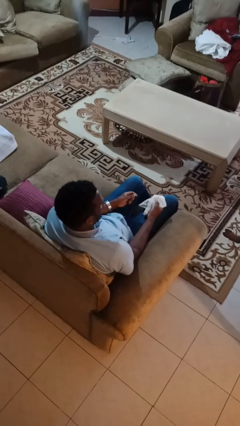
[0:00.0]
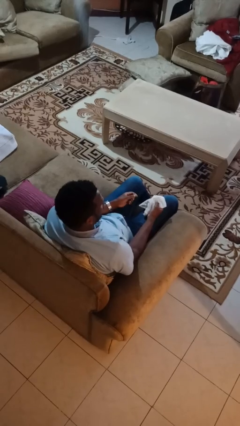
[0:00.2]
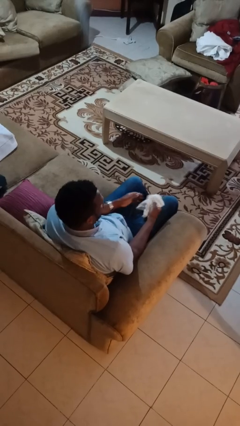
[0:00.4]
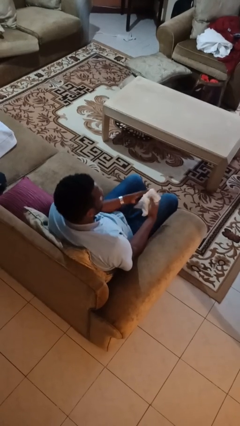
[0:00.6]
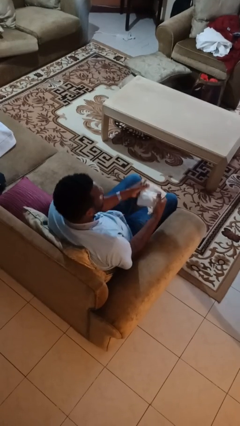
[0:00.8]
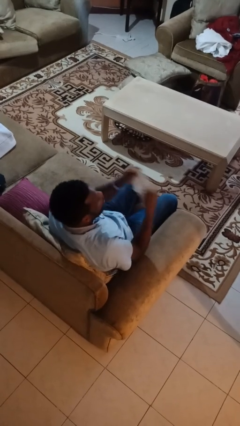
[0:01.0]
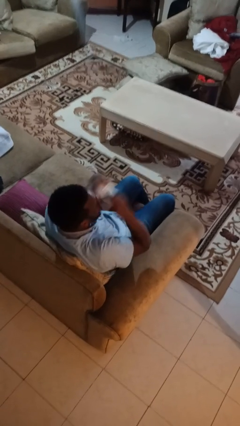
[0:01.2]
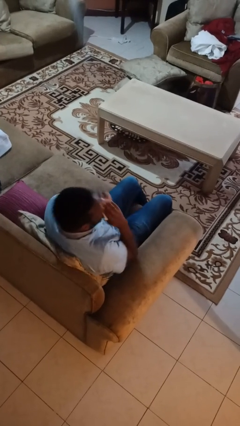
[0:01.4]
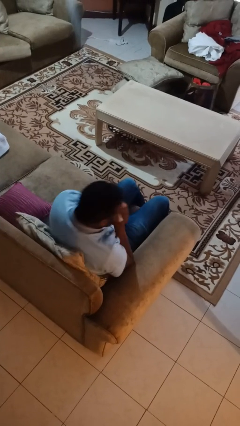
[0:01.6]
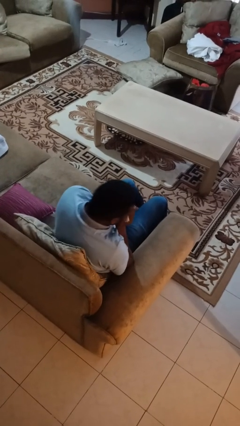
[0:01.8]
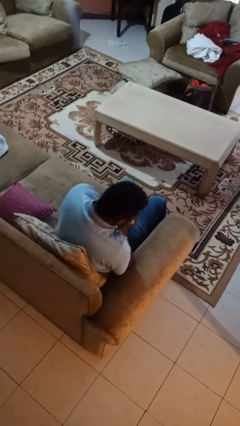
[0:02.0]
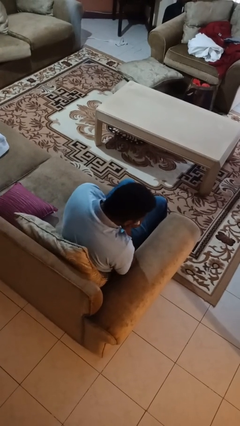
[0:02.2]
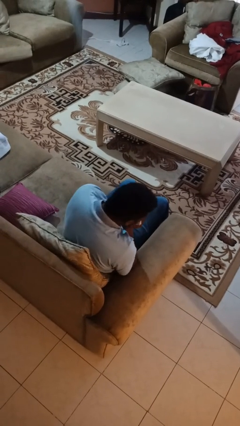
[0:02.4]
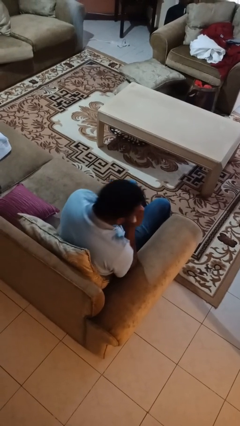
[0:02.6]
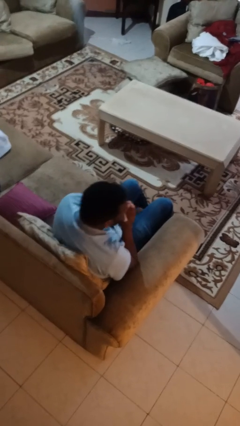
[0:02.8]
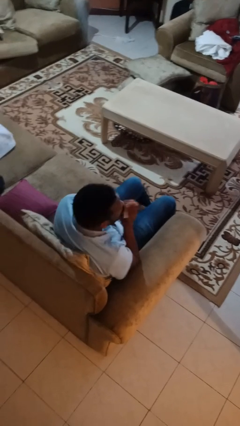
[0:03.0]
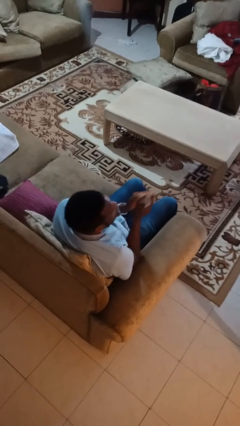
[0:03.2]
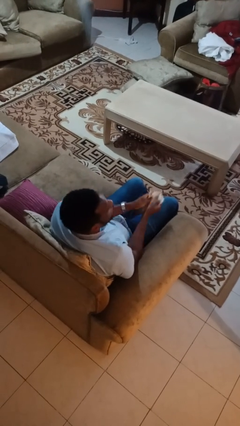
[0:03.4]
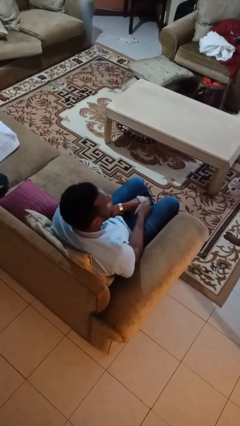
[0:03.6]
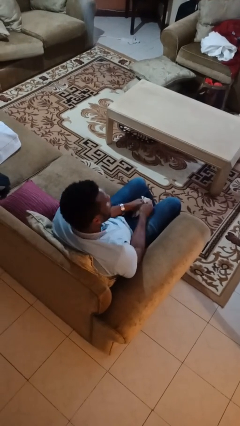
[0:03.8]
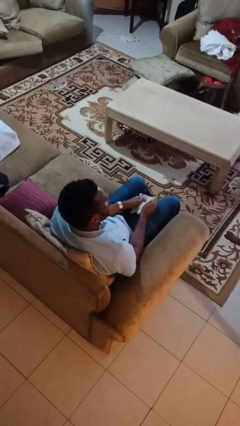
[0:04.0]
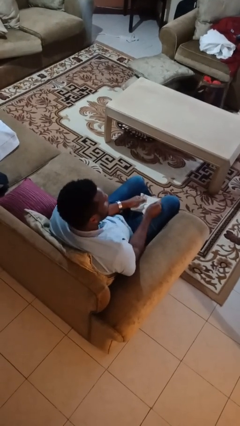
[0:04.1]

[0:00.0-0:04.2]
person blows nose

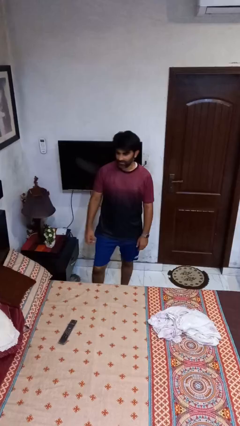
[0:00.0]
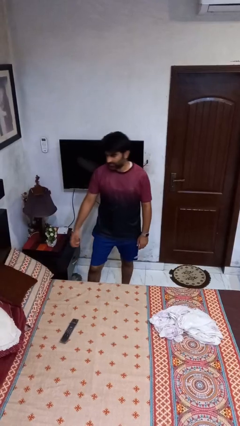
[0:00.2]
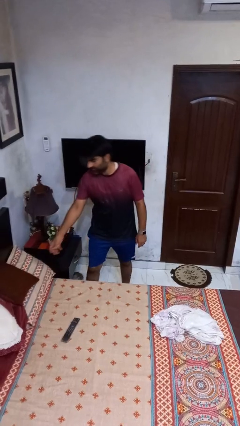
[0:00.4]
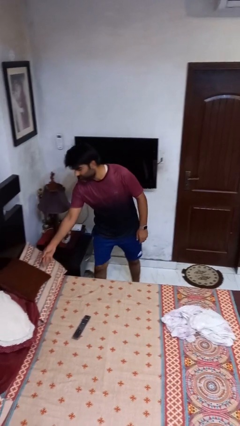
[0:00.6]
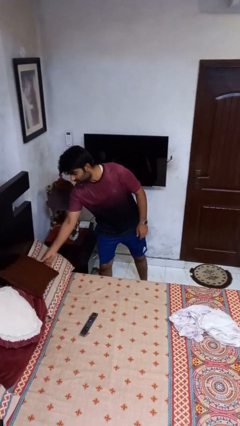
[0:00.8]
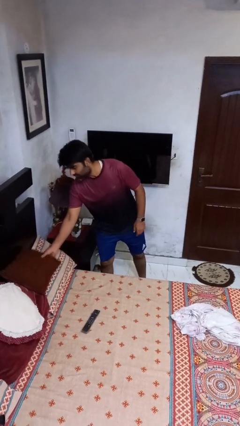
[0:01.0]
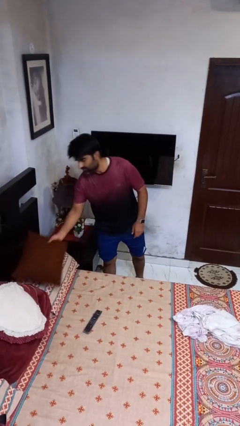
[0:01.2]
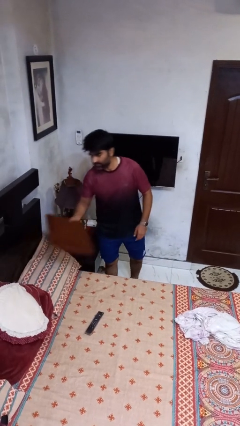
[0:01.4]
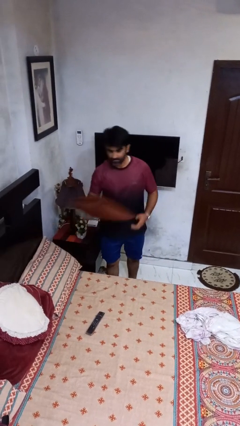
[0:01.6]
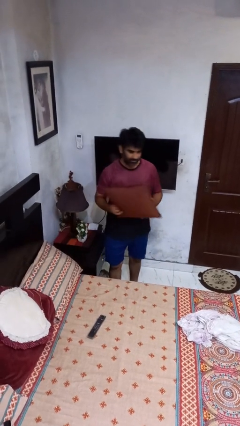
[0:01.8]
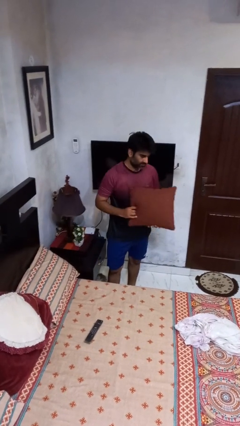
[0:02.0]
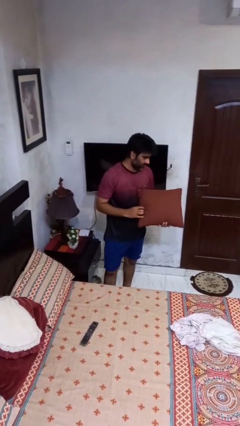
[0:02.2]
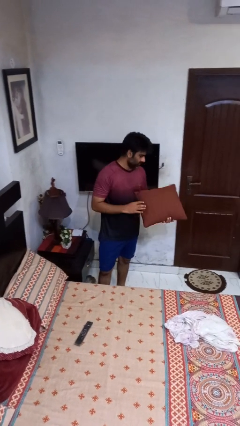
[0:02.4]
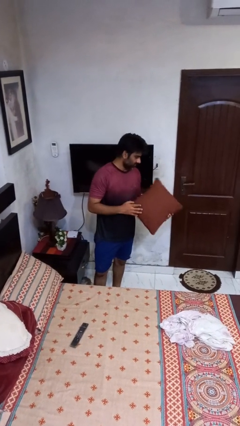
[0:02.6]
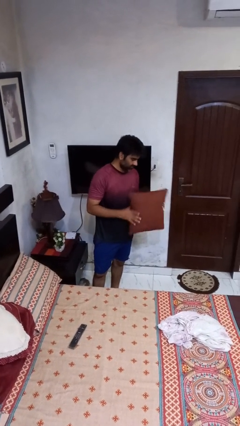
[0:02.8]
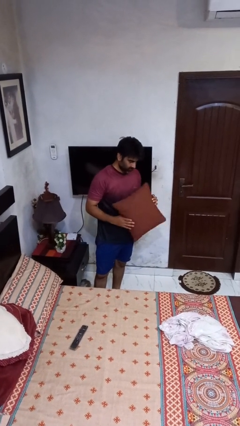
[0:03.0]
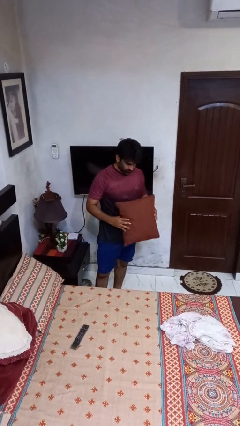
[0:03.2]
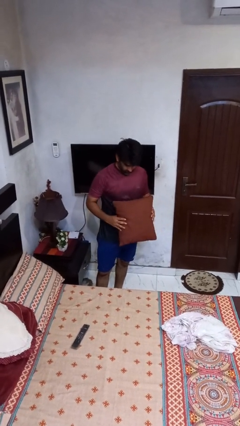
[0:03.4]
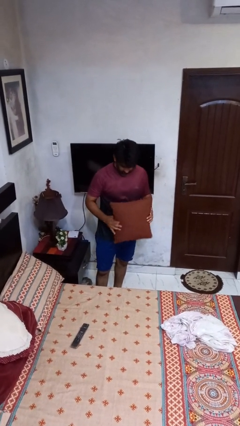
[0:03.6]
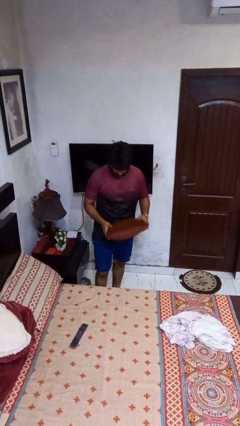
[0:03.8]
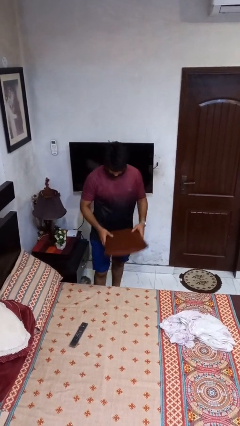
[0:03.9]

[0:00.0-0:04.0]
person picks up object from bed

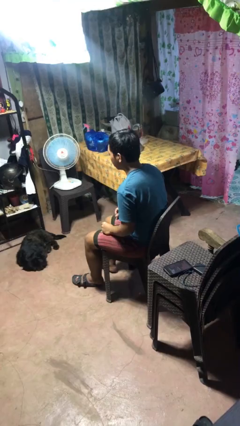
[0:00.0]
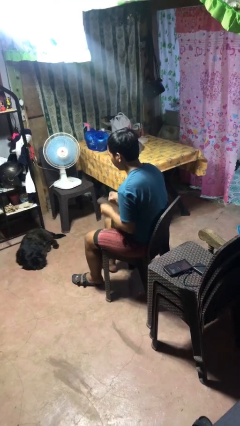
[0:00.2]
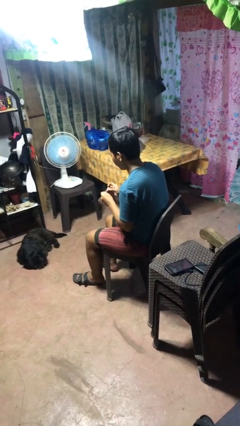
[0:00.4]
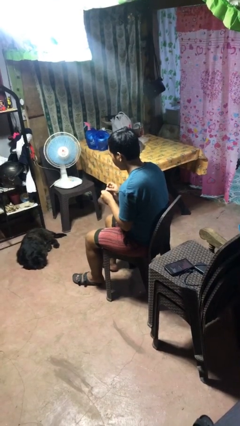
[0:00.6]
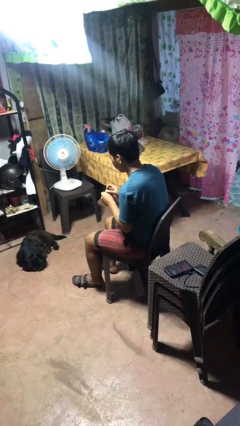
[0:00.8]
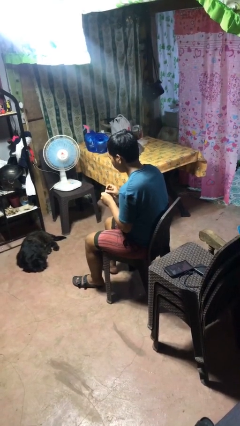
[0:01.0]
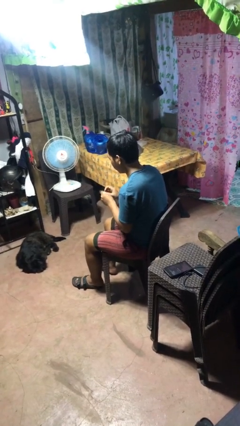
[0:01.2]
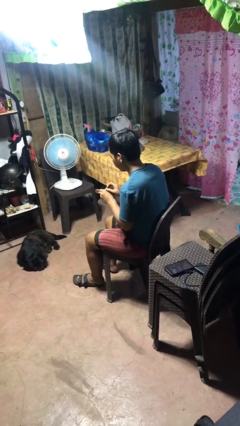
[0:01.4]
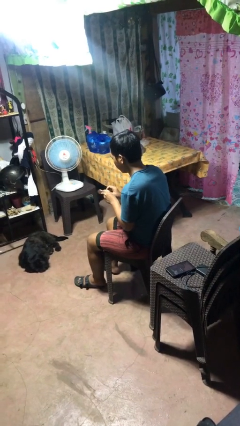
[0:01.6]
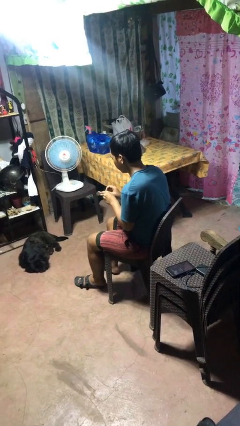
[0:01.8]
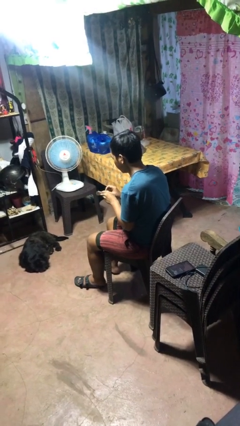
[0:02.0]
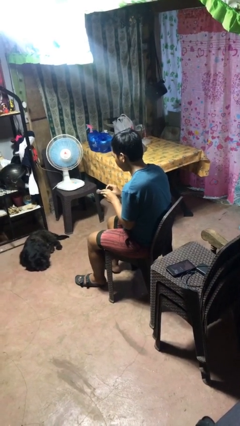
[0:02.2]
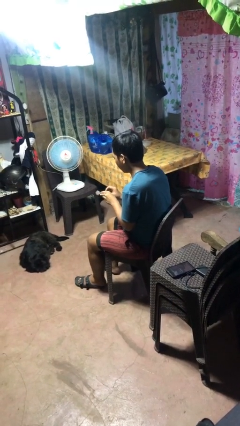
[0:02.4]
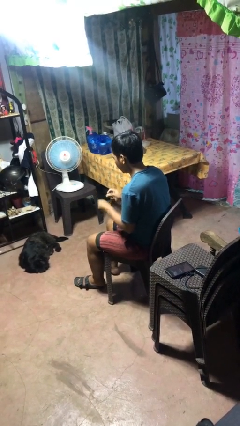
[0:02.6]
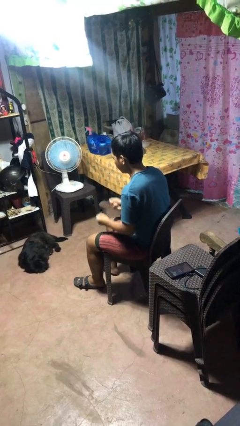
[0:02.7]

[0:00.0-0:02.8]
person files fingernails

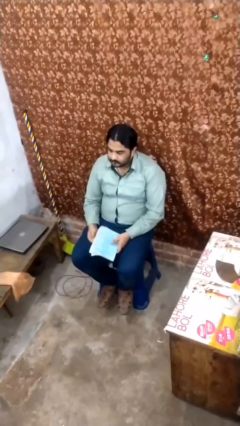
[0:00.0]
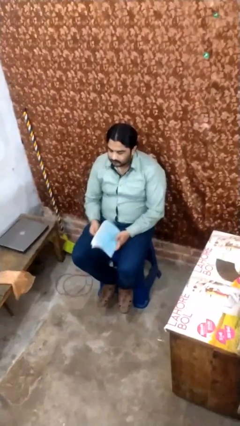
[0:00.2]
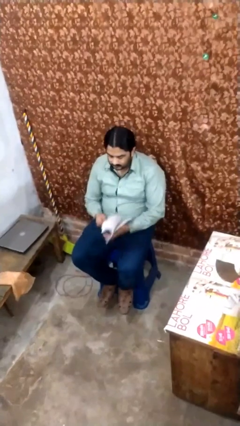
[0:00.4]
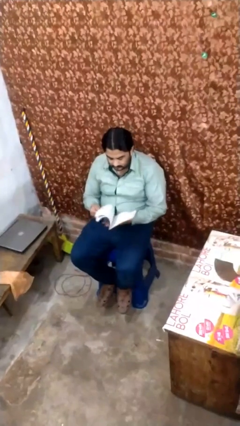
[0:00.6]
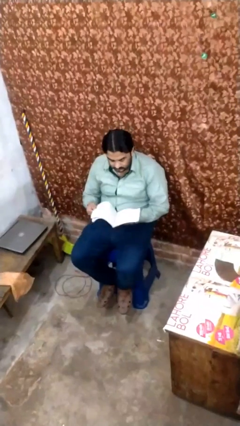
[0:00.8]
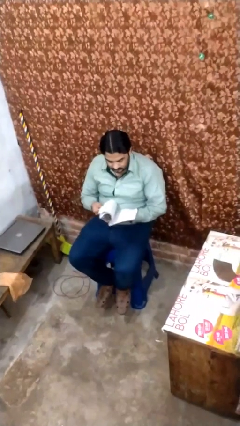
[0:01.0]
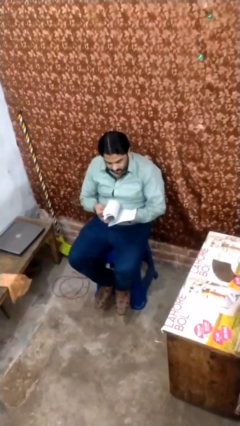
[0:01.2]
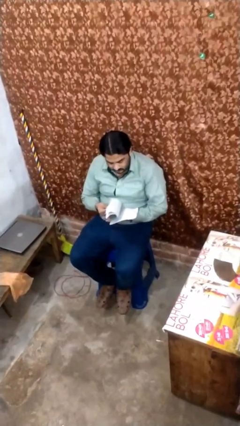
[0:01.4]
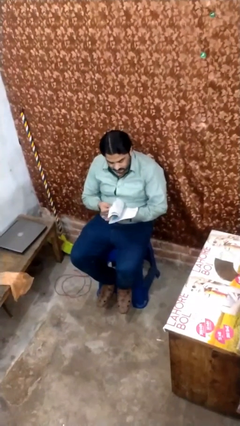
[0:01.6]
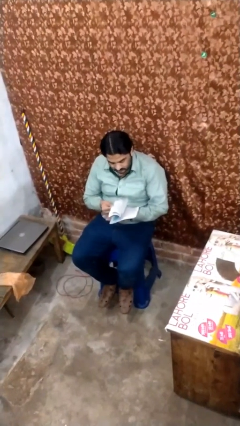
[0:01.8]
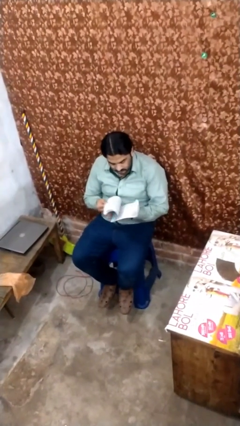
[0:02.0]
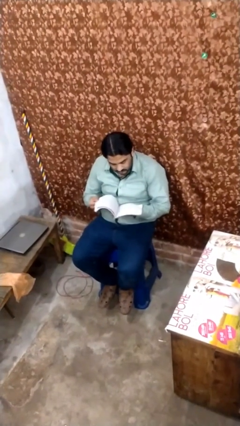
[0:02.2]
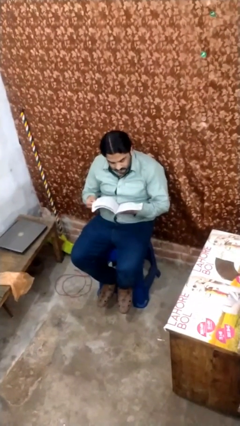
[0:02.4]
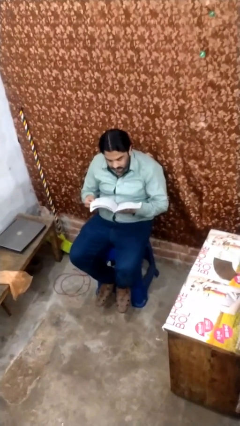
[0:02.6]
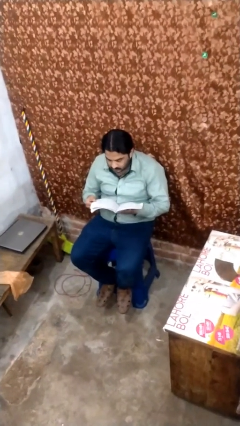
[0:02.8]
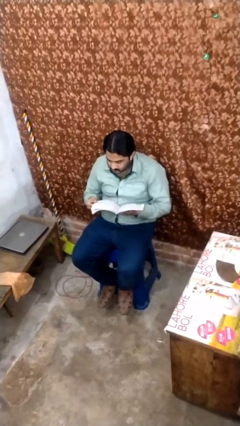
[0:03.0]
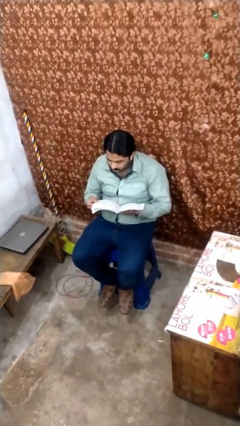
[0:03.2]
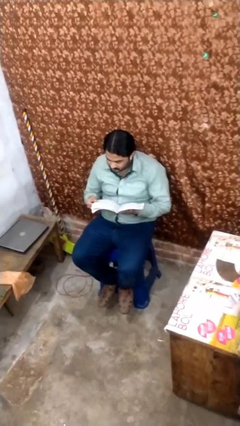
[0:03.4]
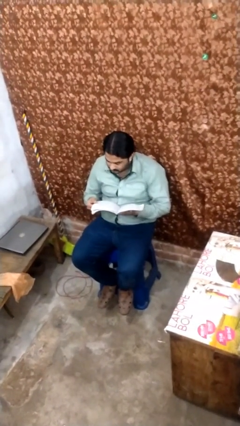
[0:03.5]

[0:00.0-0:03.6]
person reads document

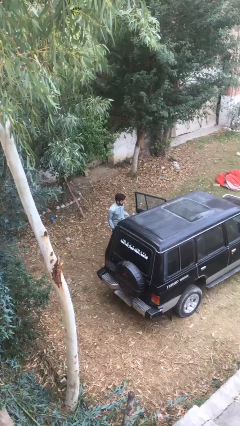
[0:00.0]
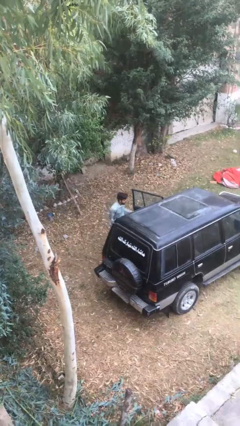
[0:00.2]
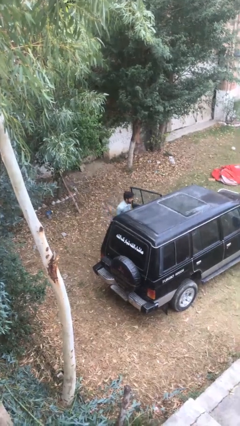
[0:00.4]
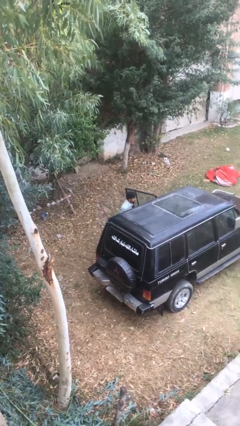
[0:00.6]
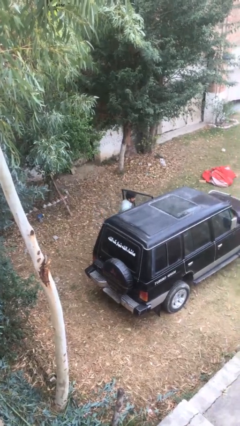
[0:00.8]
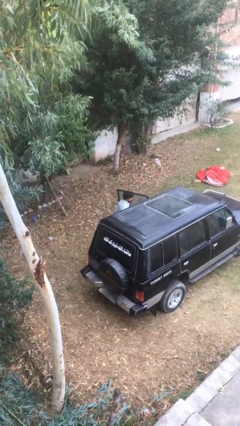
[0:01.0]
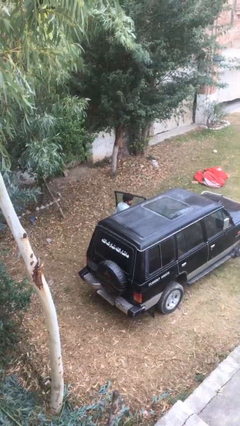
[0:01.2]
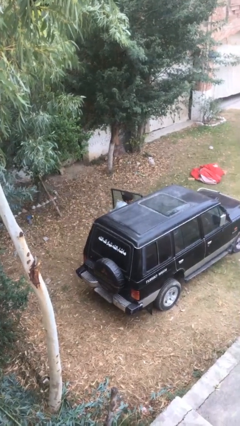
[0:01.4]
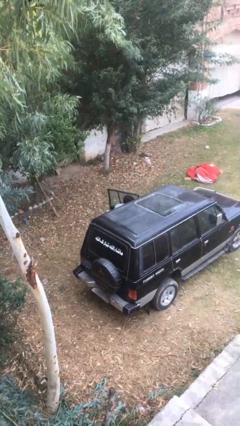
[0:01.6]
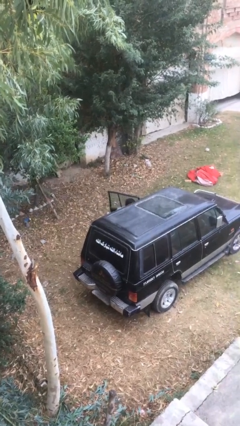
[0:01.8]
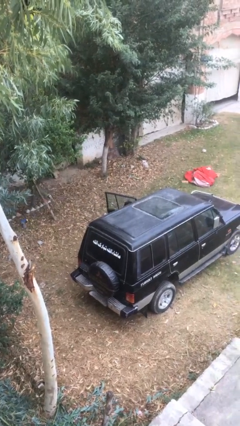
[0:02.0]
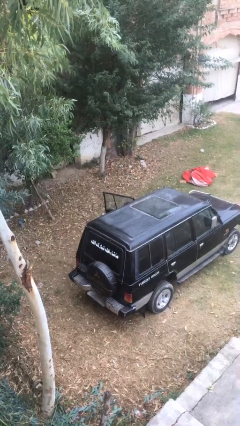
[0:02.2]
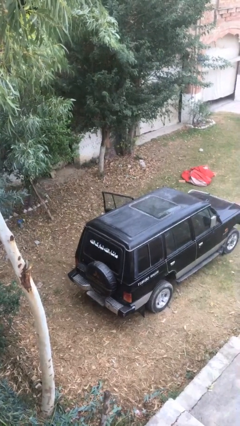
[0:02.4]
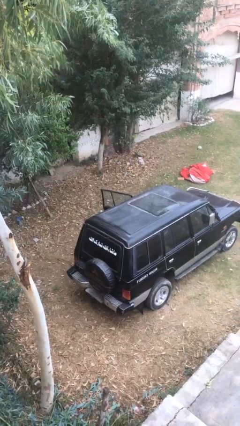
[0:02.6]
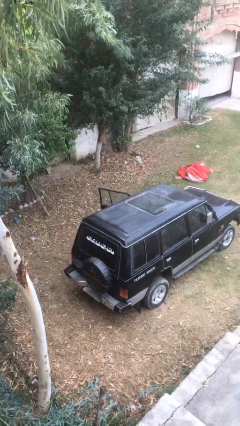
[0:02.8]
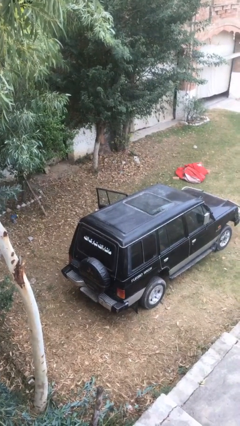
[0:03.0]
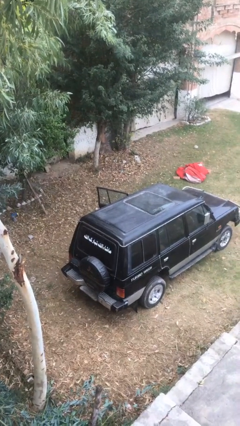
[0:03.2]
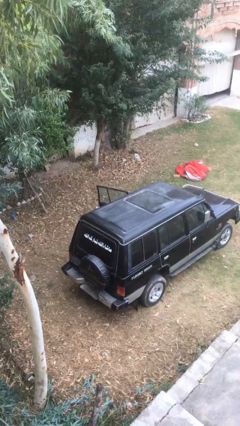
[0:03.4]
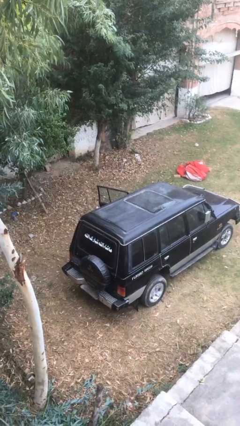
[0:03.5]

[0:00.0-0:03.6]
person enters car
